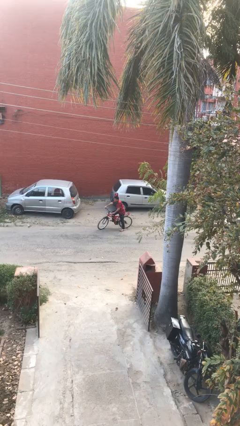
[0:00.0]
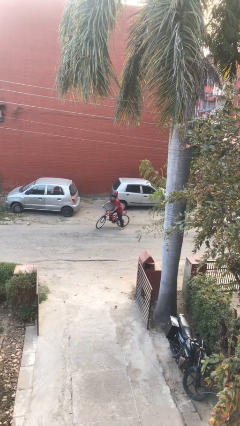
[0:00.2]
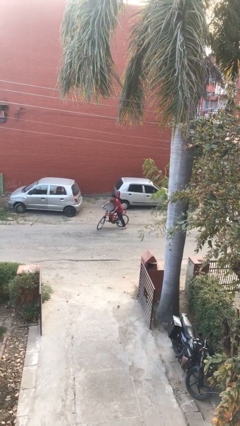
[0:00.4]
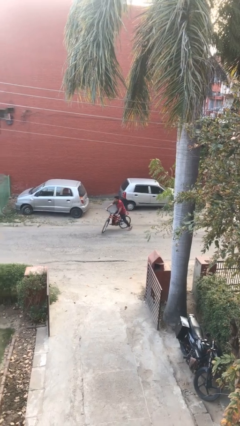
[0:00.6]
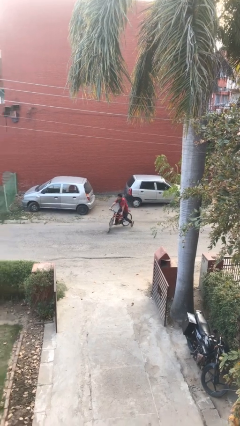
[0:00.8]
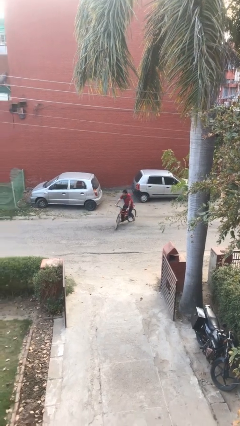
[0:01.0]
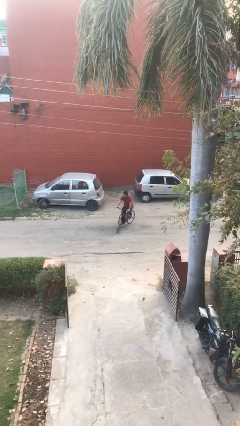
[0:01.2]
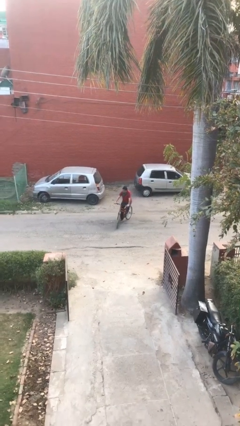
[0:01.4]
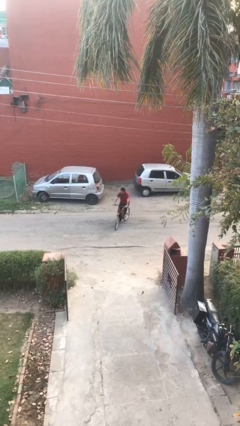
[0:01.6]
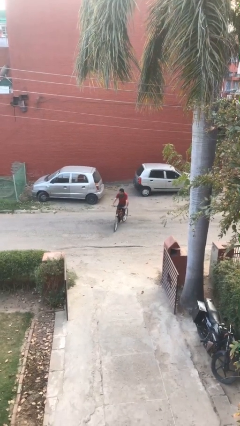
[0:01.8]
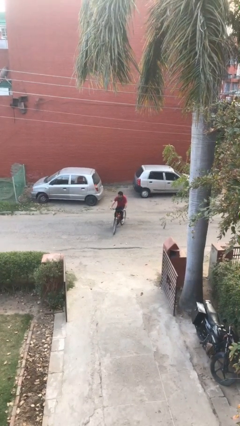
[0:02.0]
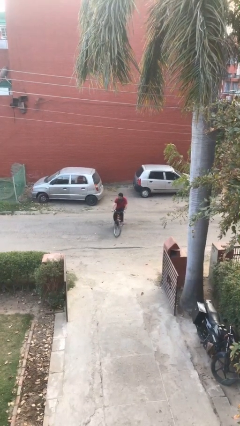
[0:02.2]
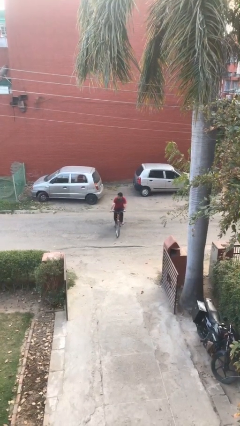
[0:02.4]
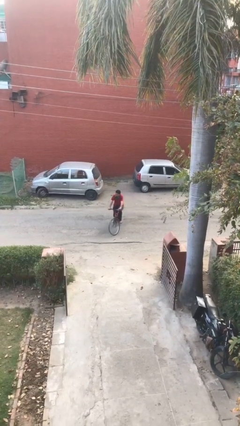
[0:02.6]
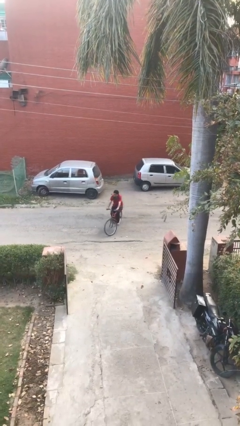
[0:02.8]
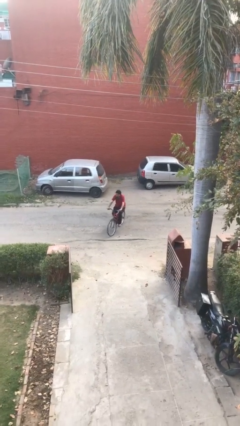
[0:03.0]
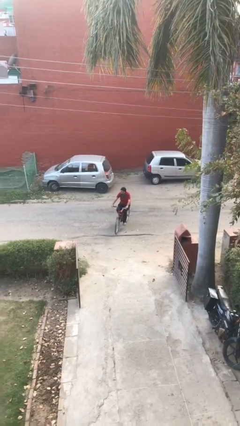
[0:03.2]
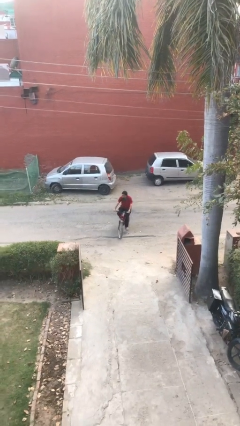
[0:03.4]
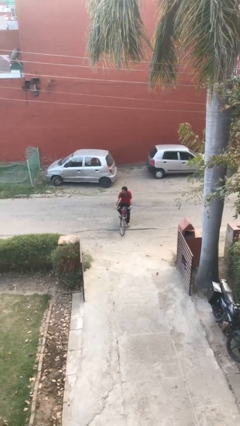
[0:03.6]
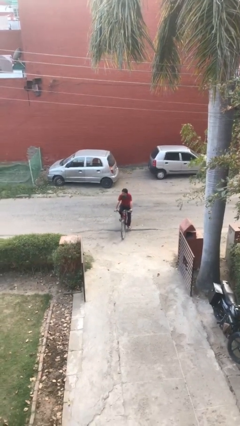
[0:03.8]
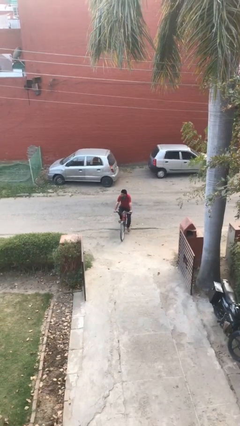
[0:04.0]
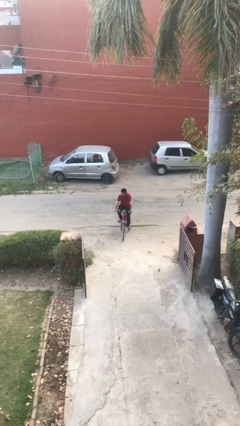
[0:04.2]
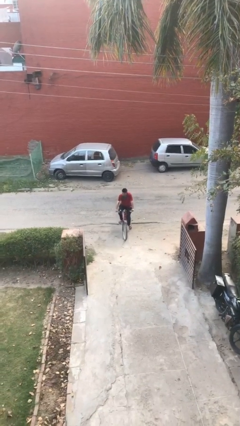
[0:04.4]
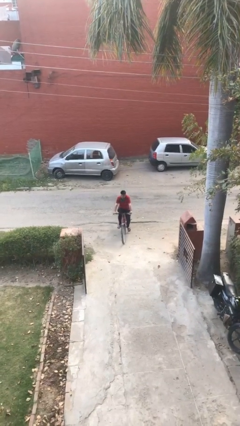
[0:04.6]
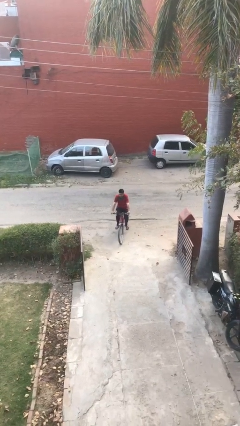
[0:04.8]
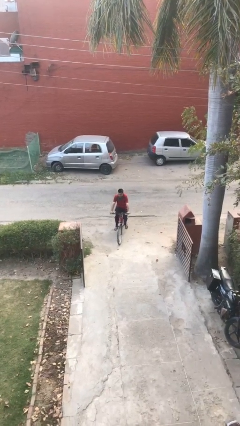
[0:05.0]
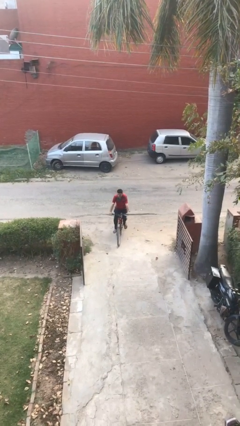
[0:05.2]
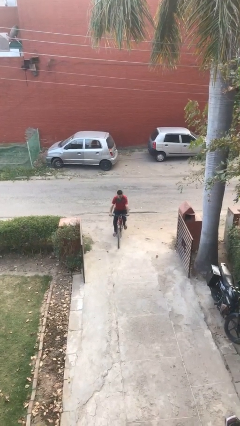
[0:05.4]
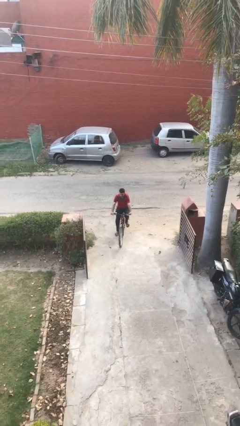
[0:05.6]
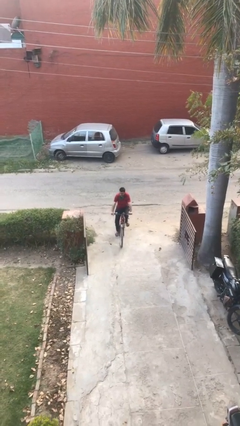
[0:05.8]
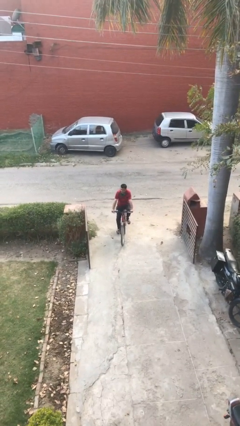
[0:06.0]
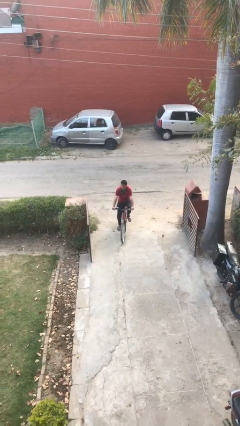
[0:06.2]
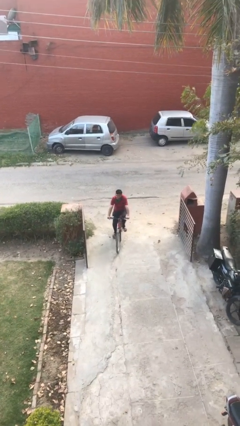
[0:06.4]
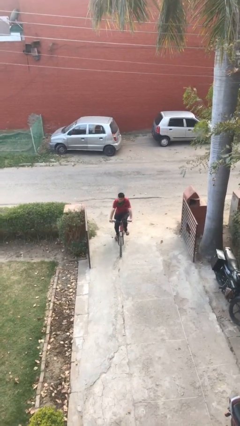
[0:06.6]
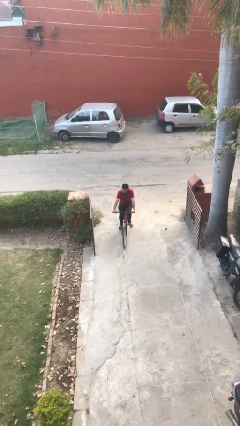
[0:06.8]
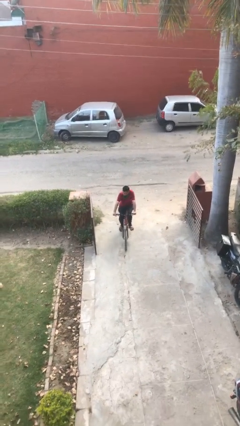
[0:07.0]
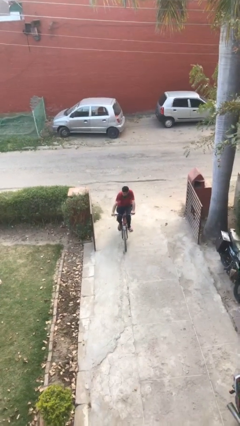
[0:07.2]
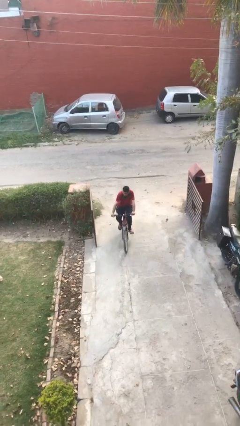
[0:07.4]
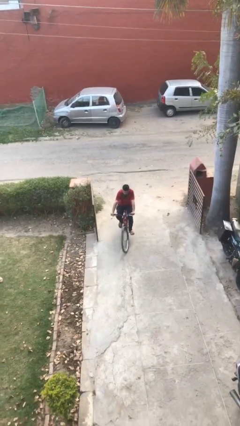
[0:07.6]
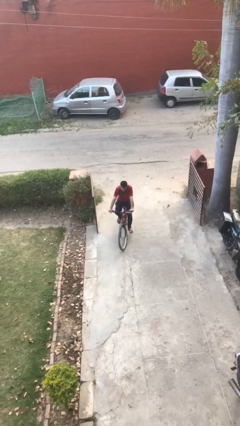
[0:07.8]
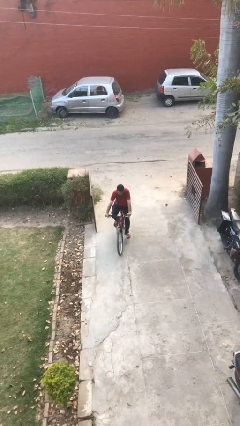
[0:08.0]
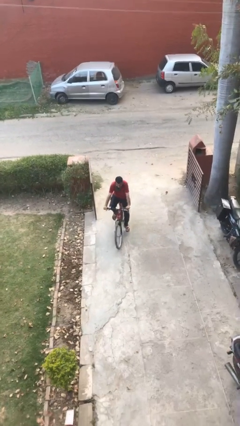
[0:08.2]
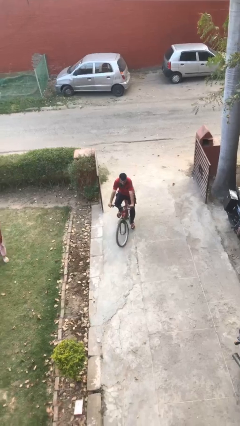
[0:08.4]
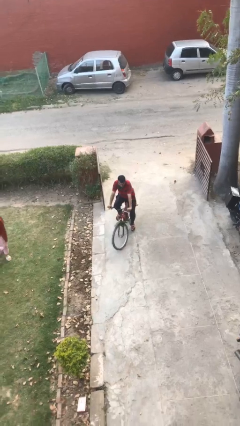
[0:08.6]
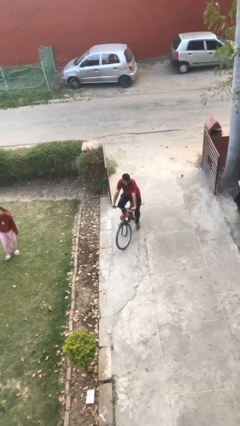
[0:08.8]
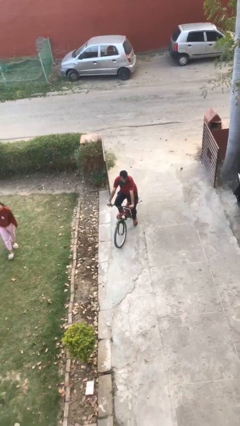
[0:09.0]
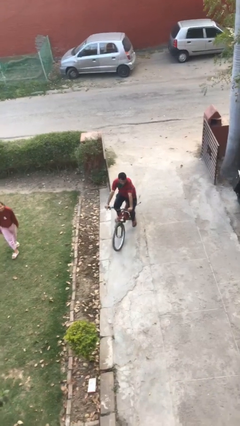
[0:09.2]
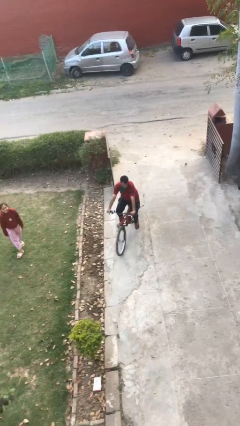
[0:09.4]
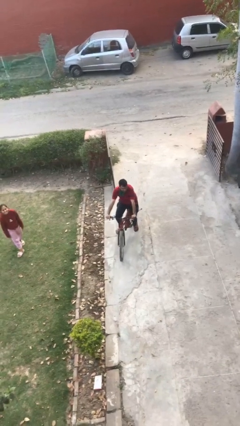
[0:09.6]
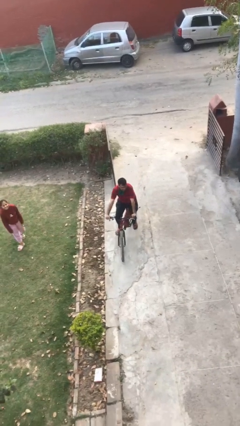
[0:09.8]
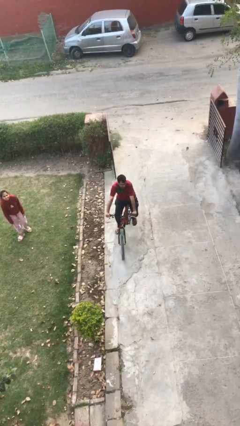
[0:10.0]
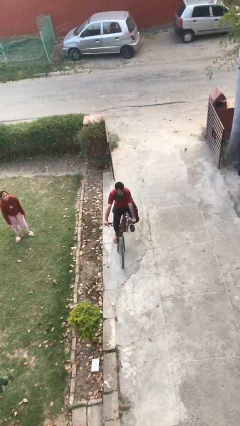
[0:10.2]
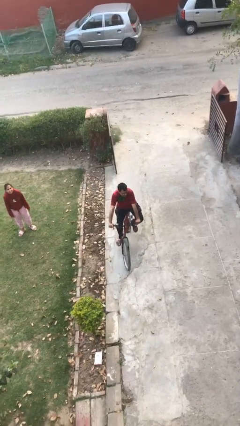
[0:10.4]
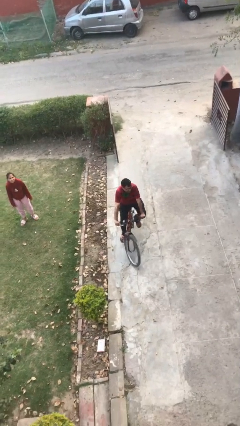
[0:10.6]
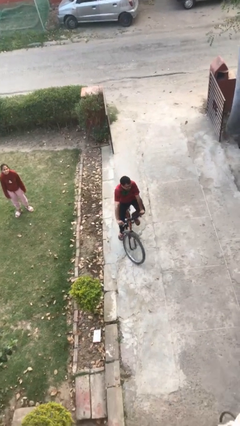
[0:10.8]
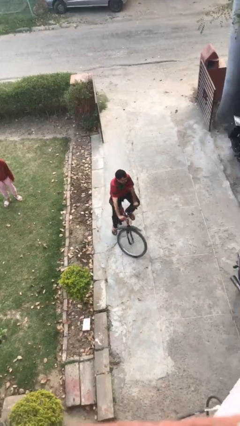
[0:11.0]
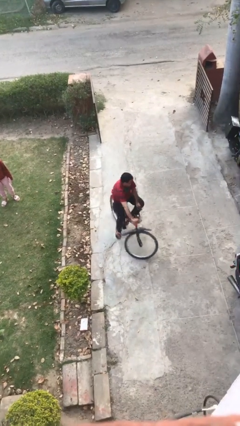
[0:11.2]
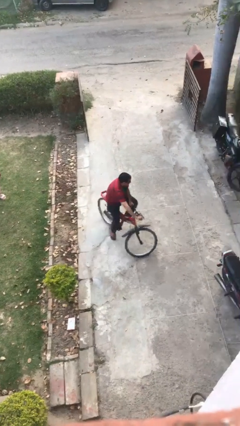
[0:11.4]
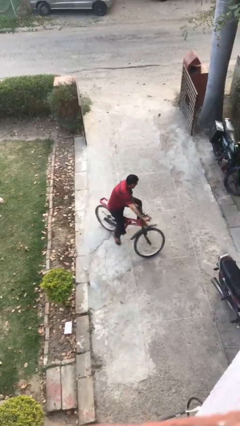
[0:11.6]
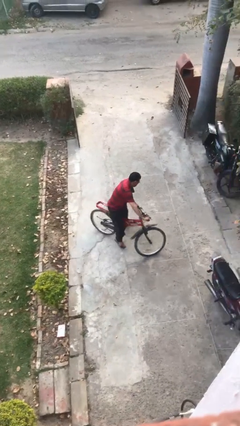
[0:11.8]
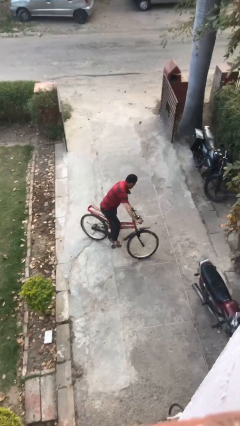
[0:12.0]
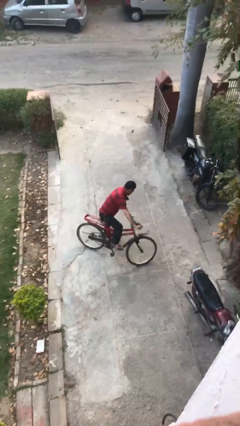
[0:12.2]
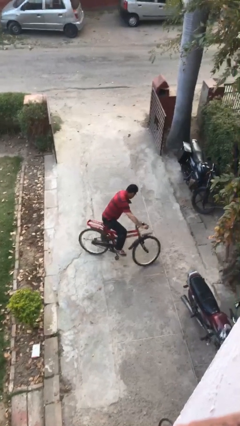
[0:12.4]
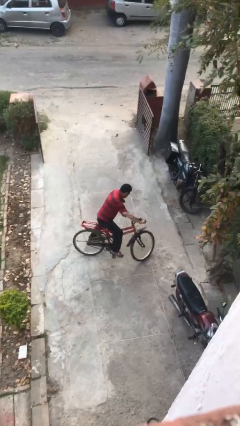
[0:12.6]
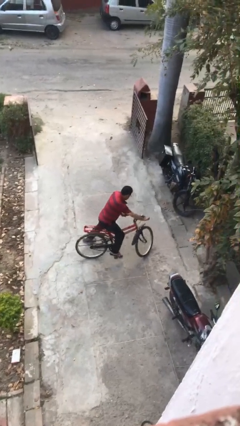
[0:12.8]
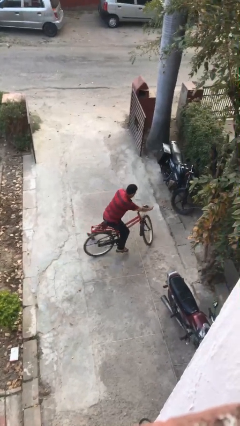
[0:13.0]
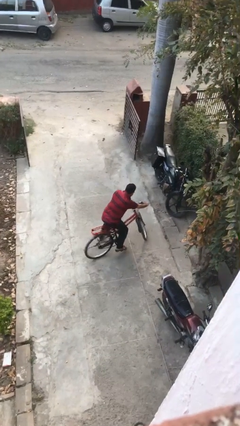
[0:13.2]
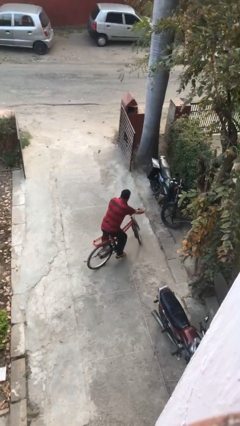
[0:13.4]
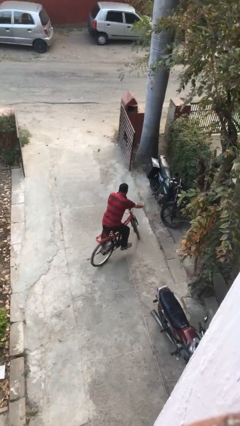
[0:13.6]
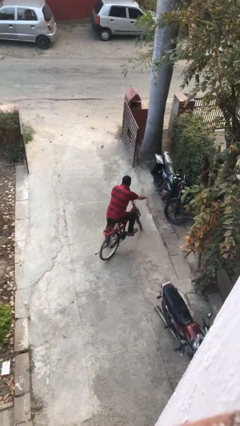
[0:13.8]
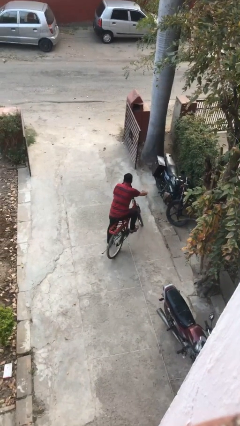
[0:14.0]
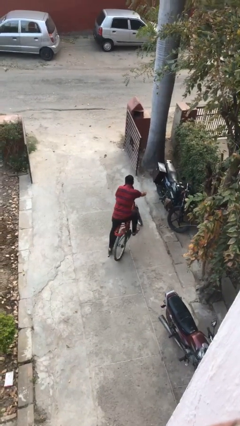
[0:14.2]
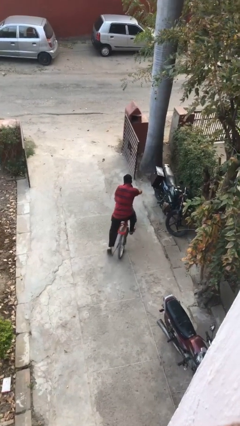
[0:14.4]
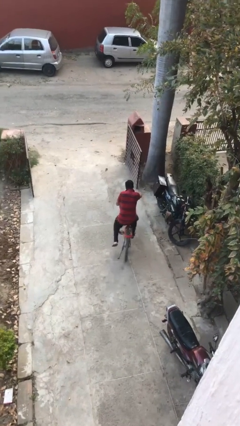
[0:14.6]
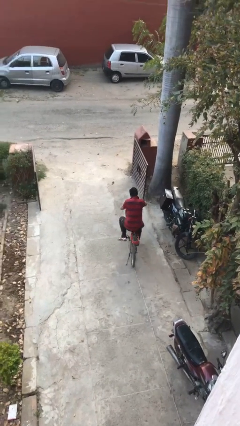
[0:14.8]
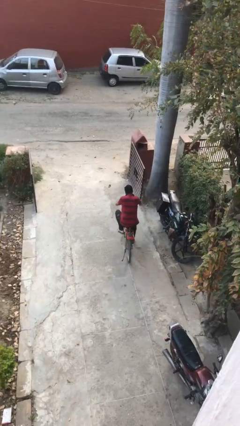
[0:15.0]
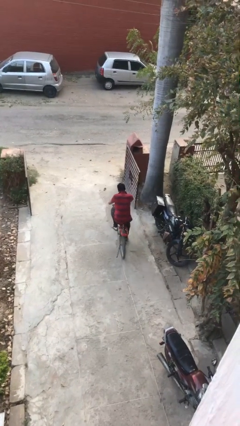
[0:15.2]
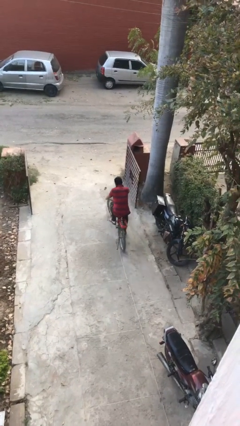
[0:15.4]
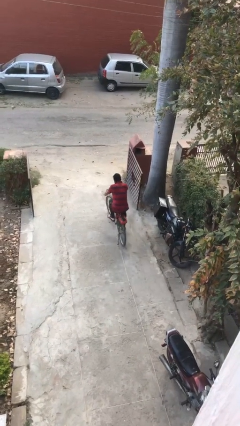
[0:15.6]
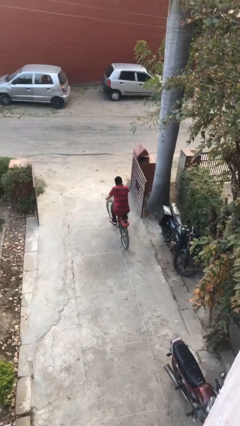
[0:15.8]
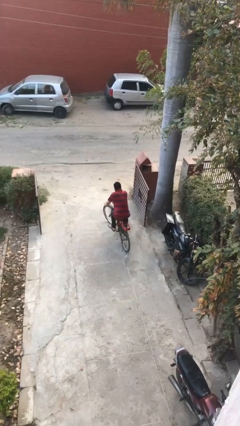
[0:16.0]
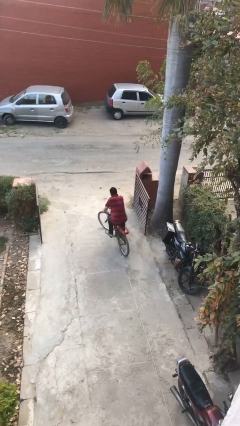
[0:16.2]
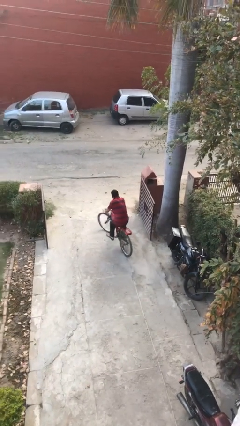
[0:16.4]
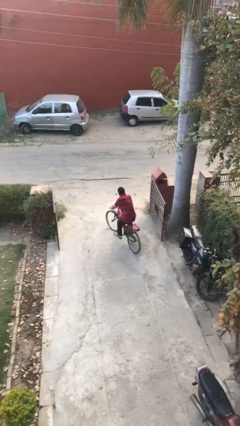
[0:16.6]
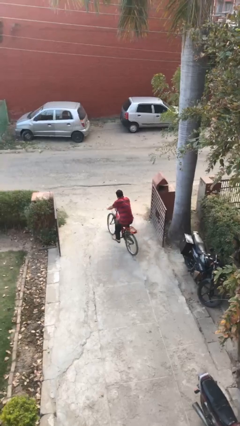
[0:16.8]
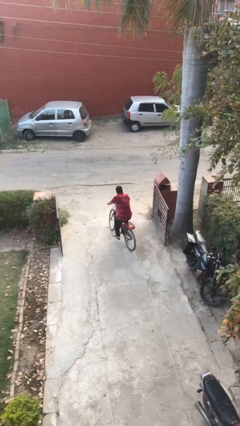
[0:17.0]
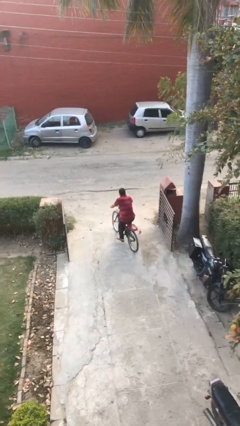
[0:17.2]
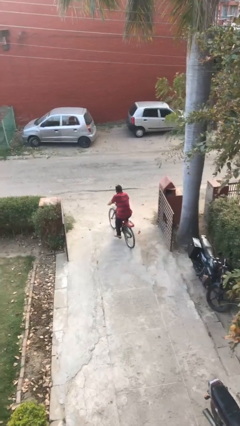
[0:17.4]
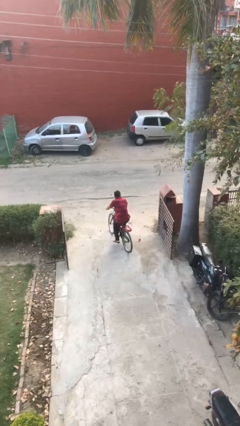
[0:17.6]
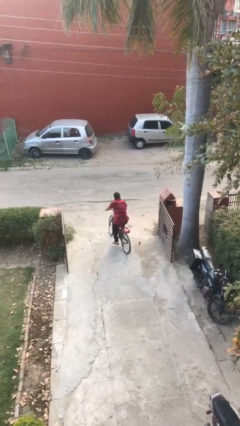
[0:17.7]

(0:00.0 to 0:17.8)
person rides bicycle

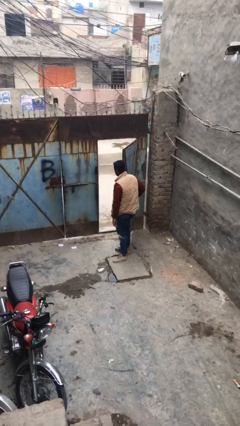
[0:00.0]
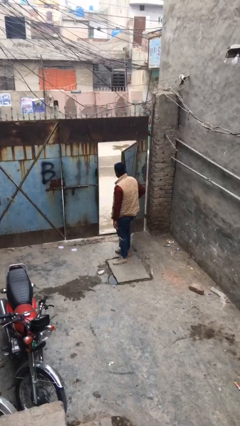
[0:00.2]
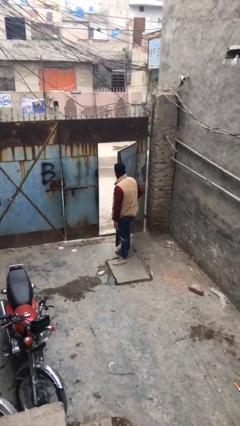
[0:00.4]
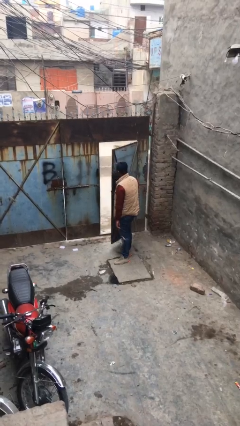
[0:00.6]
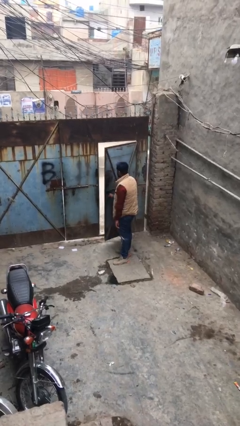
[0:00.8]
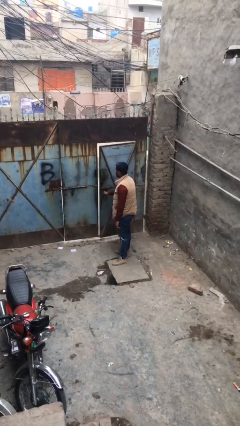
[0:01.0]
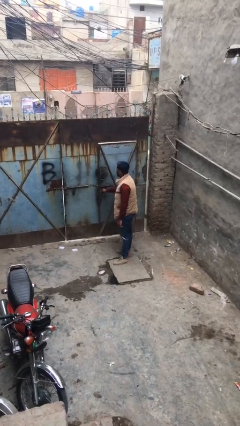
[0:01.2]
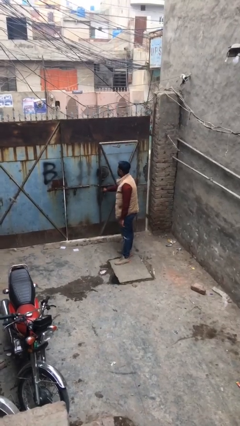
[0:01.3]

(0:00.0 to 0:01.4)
person closes facility door
